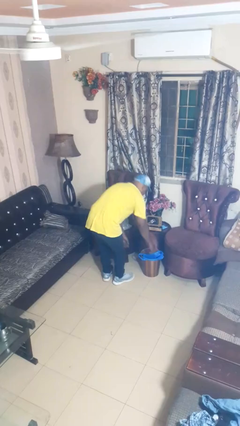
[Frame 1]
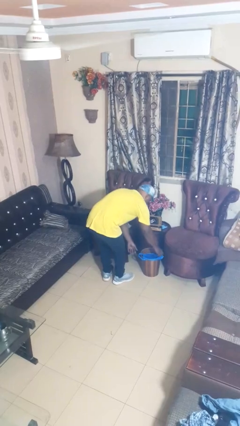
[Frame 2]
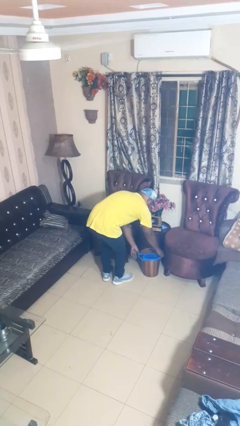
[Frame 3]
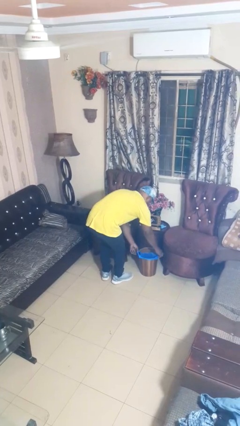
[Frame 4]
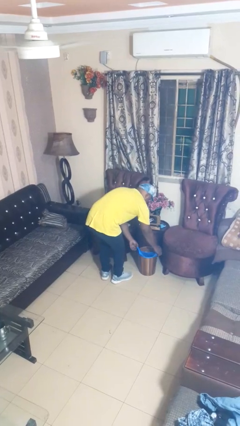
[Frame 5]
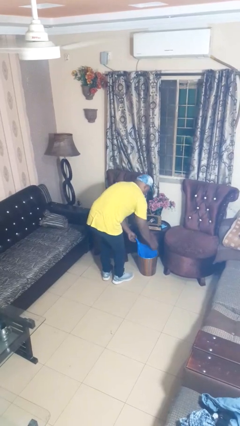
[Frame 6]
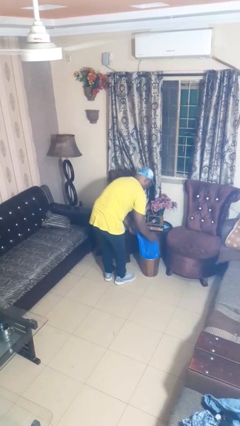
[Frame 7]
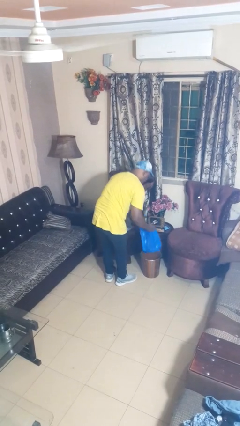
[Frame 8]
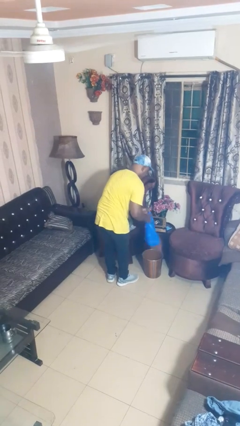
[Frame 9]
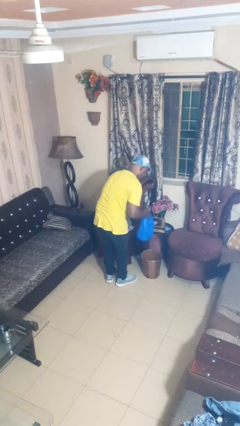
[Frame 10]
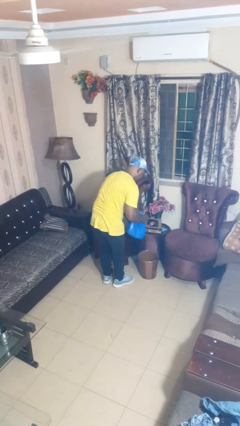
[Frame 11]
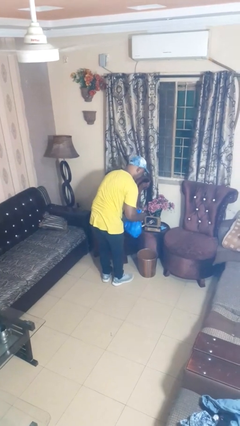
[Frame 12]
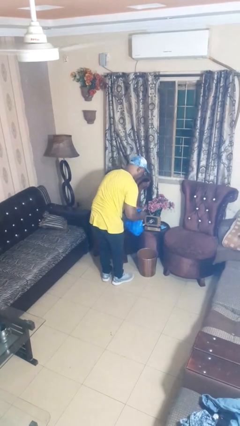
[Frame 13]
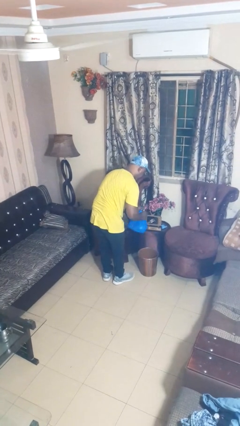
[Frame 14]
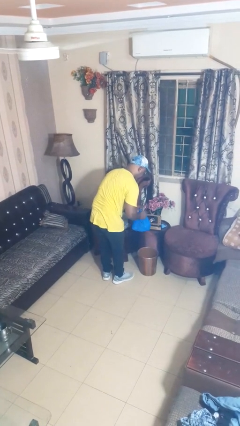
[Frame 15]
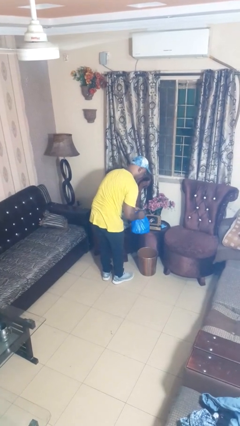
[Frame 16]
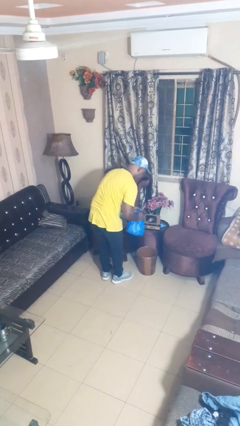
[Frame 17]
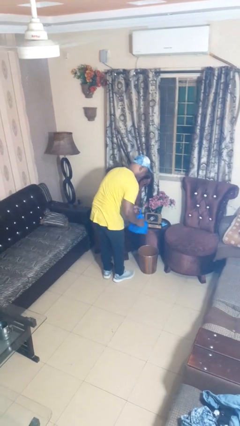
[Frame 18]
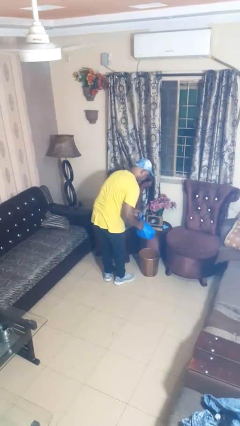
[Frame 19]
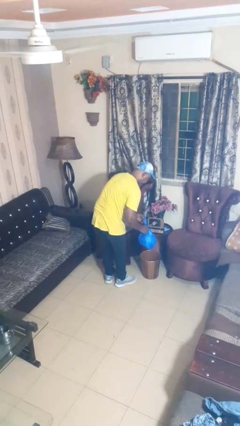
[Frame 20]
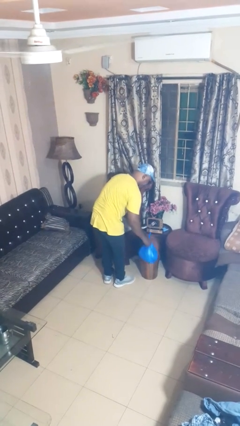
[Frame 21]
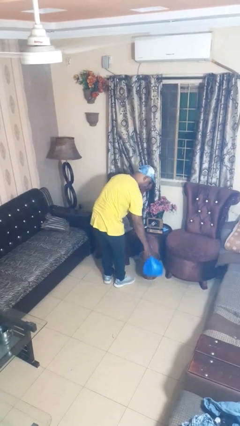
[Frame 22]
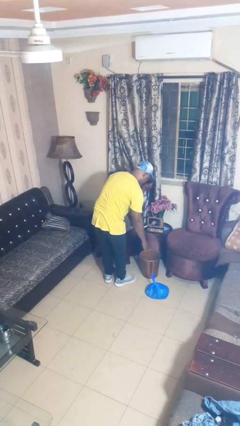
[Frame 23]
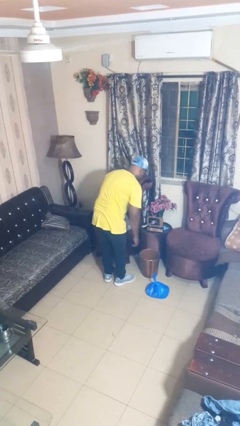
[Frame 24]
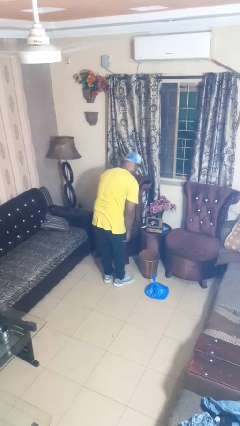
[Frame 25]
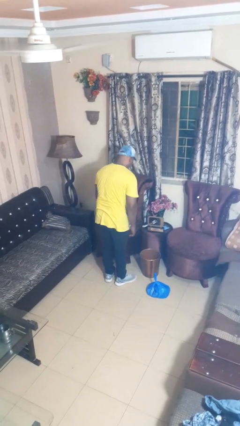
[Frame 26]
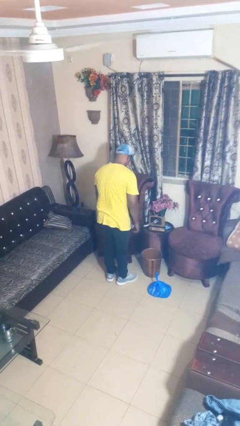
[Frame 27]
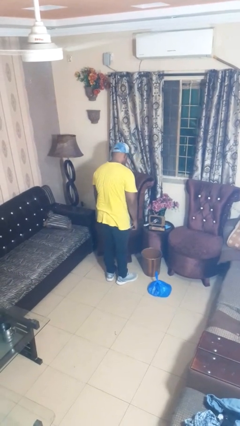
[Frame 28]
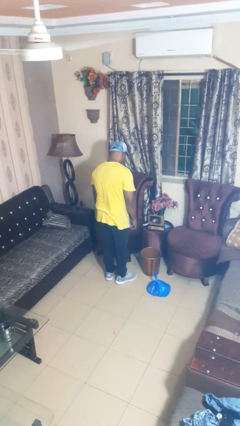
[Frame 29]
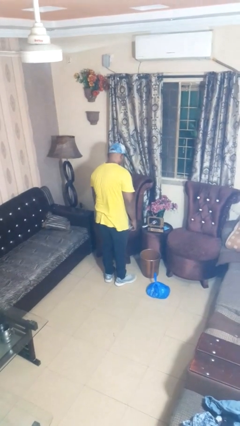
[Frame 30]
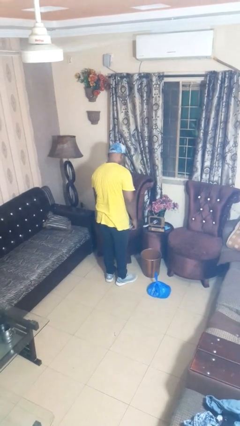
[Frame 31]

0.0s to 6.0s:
person removes trashbag from trashcan

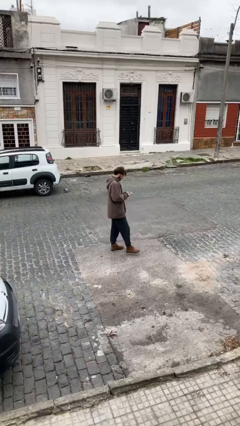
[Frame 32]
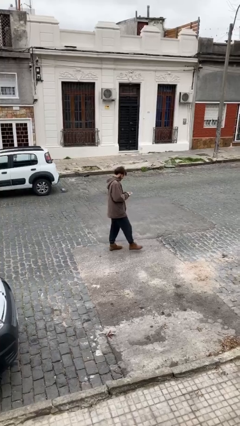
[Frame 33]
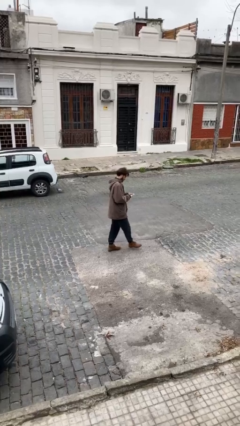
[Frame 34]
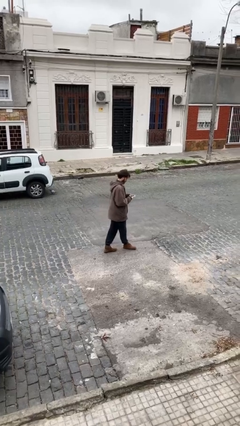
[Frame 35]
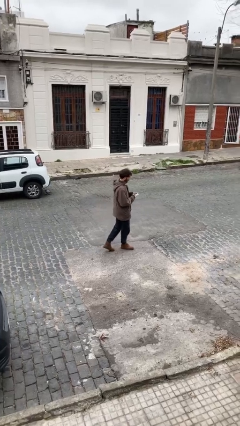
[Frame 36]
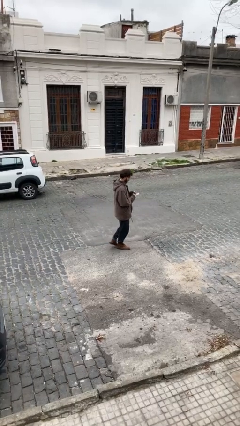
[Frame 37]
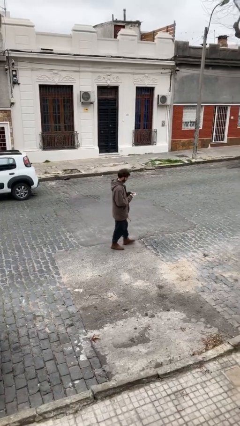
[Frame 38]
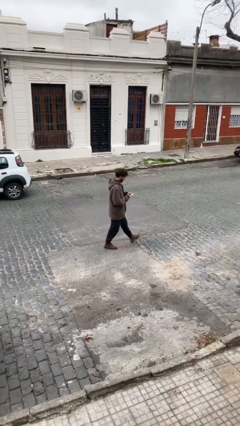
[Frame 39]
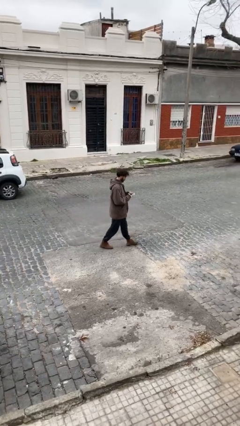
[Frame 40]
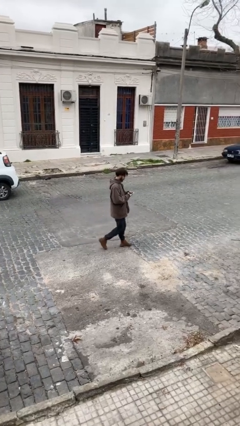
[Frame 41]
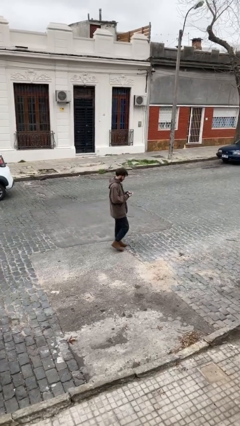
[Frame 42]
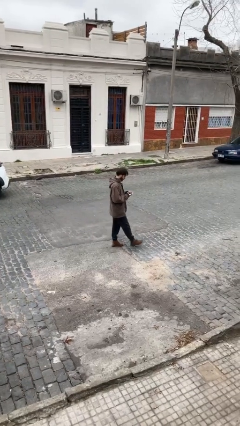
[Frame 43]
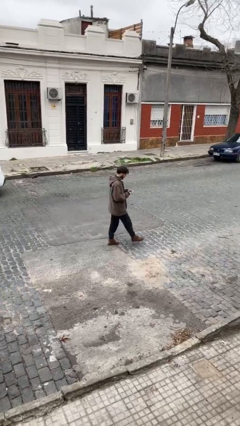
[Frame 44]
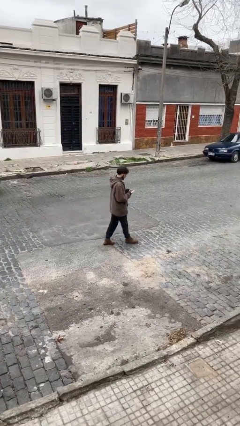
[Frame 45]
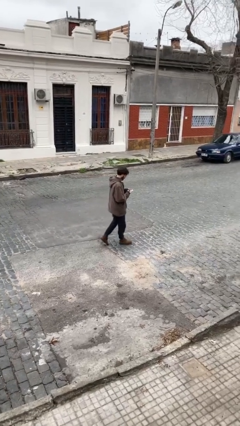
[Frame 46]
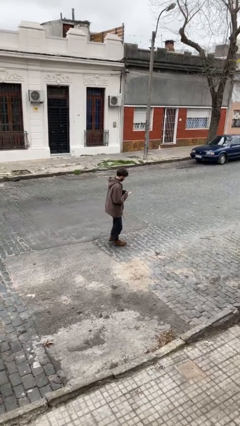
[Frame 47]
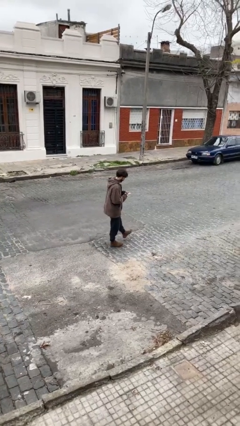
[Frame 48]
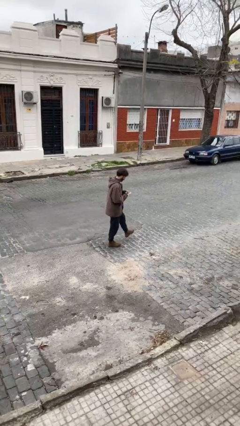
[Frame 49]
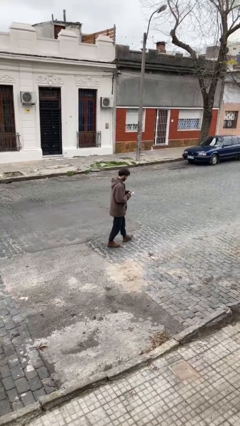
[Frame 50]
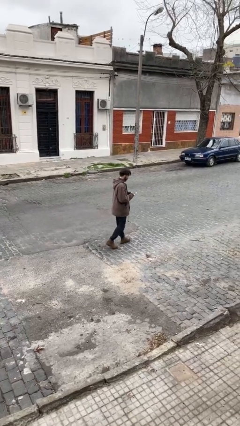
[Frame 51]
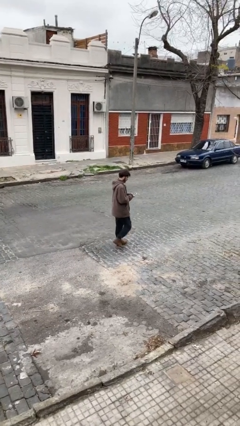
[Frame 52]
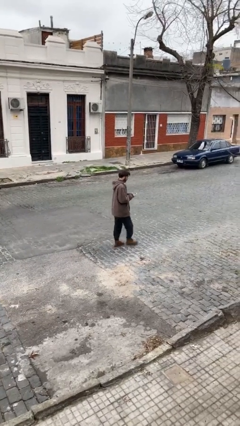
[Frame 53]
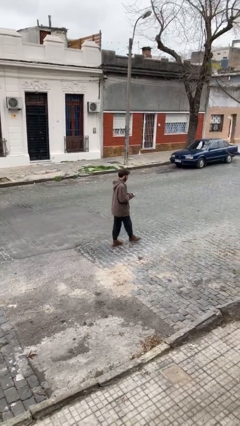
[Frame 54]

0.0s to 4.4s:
person texts on phone

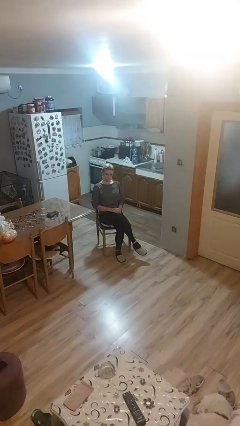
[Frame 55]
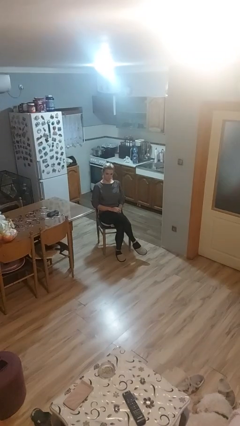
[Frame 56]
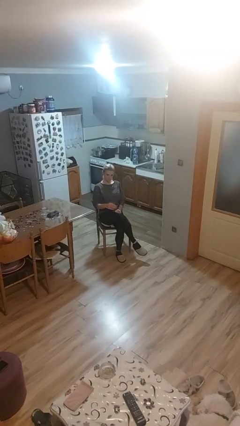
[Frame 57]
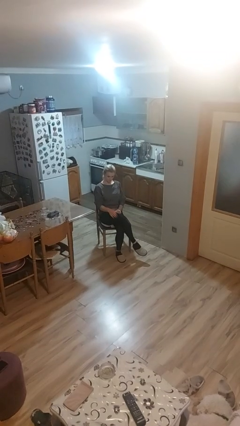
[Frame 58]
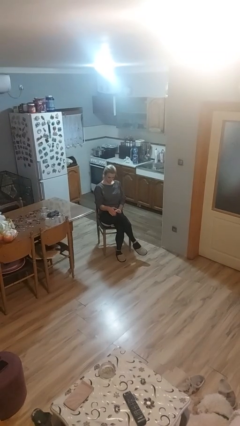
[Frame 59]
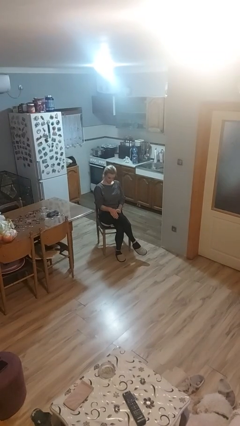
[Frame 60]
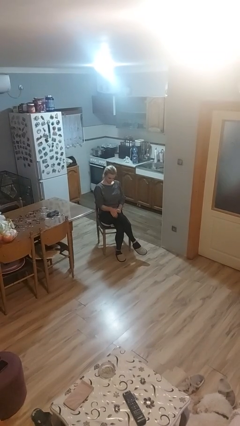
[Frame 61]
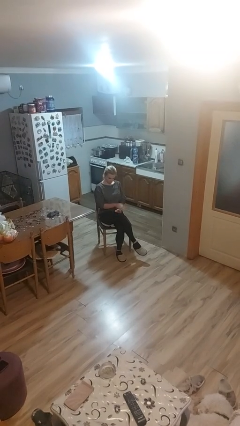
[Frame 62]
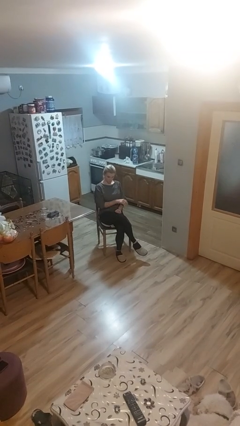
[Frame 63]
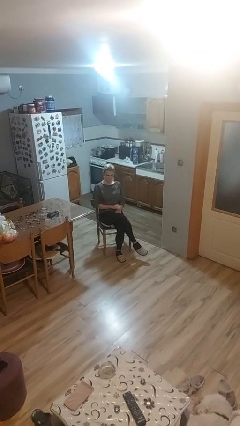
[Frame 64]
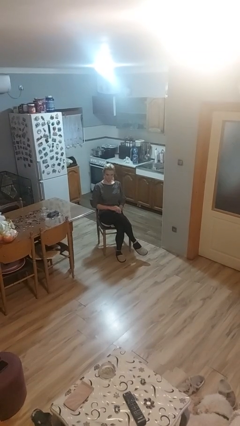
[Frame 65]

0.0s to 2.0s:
person slaps hands on thighs

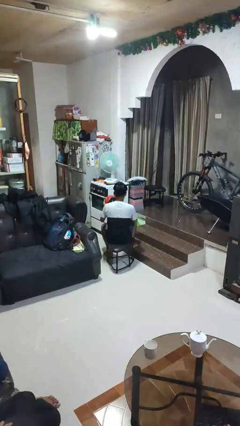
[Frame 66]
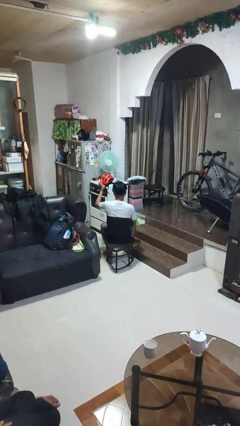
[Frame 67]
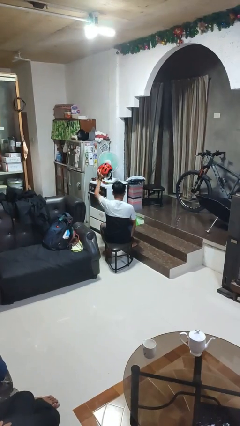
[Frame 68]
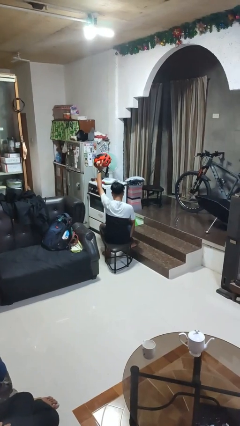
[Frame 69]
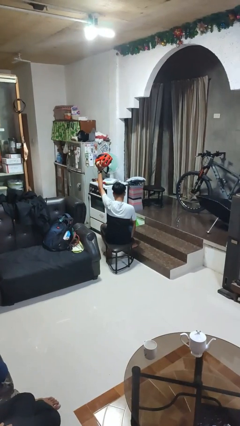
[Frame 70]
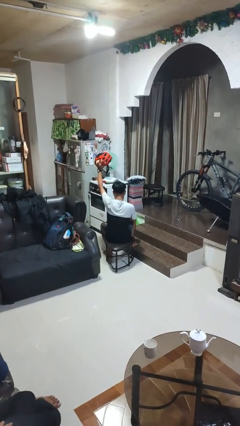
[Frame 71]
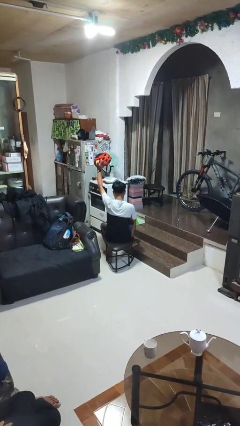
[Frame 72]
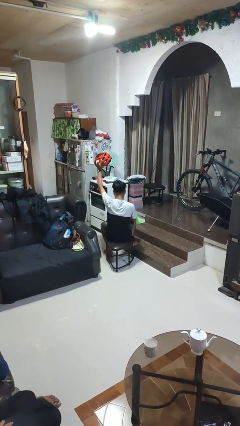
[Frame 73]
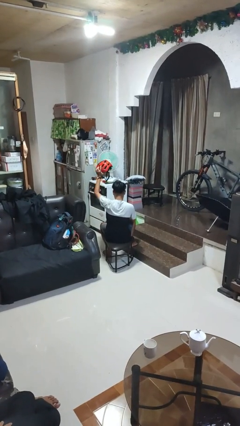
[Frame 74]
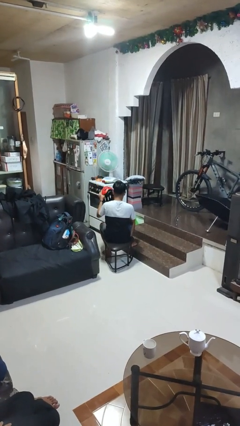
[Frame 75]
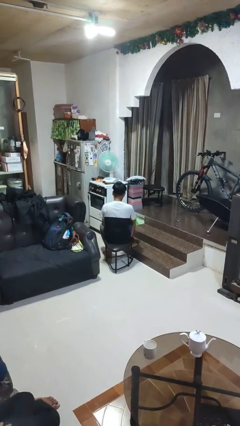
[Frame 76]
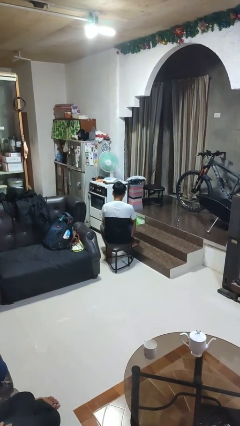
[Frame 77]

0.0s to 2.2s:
person holds object above head

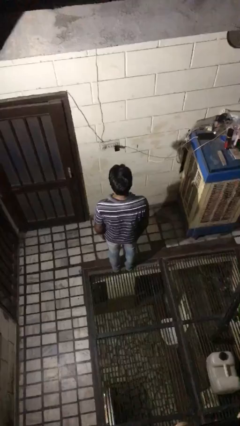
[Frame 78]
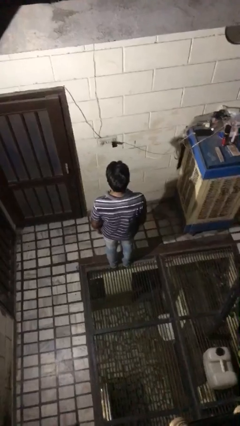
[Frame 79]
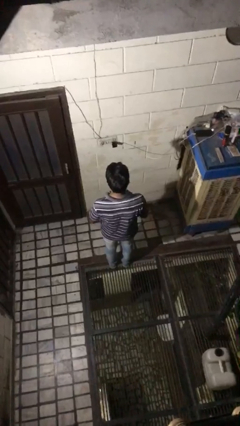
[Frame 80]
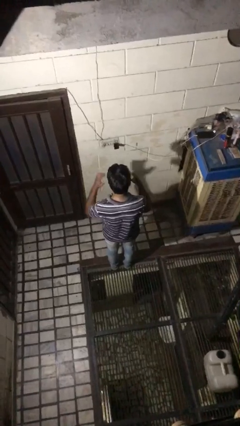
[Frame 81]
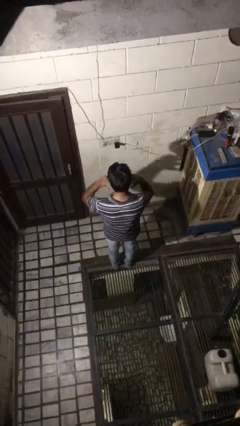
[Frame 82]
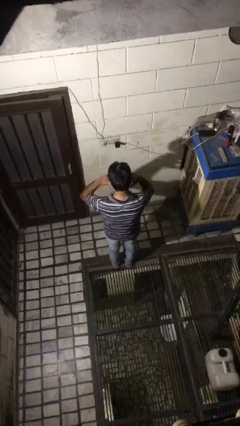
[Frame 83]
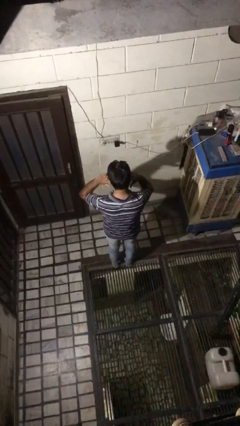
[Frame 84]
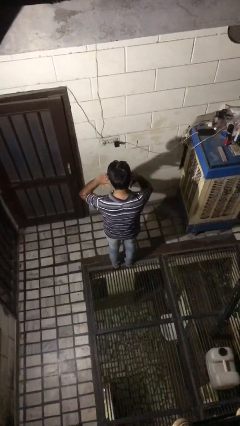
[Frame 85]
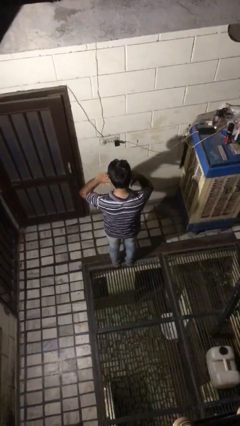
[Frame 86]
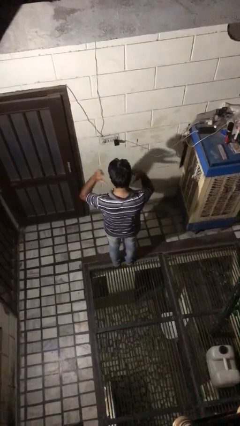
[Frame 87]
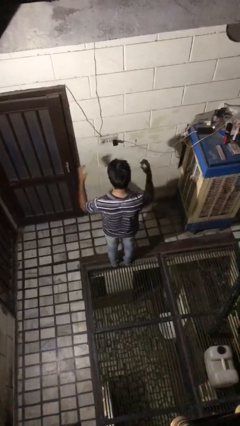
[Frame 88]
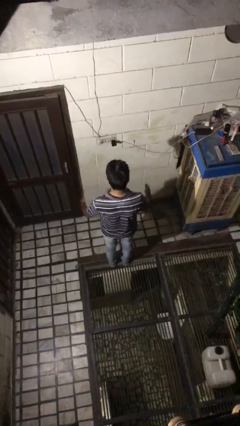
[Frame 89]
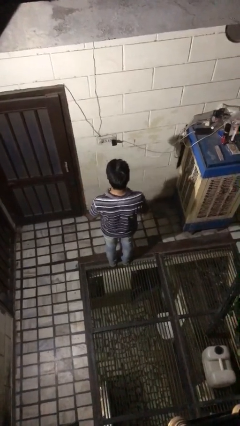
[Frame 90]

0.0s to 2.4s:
person puts fingers in ear

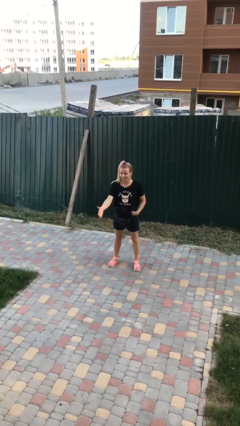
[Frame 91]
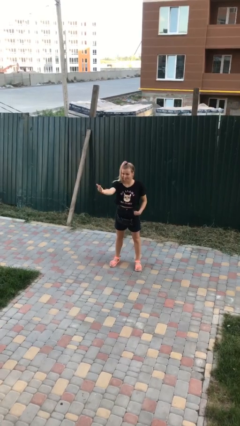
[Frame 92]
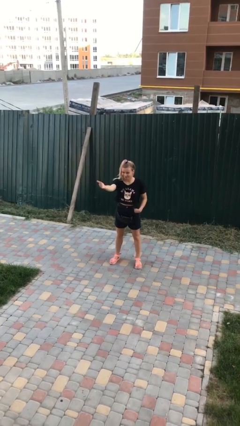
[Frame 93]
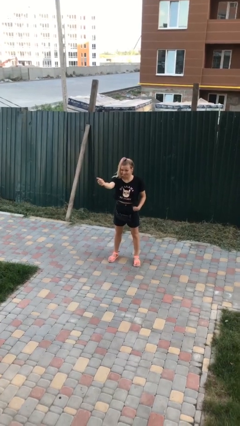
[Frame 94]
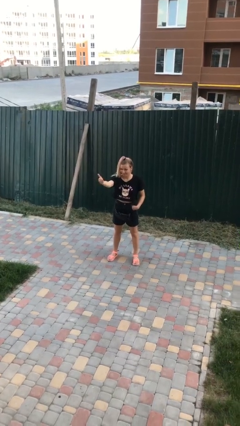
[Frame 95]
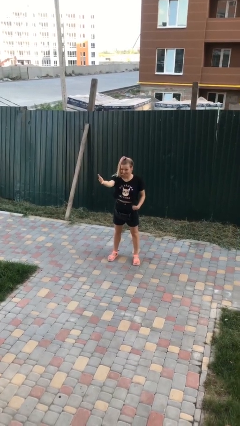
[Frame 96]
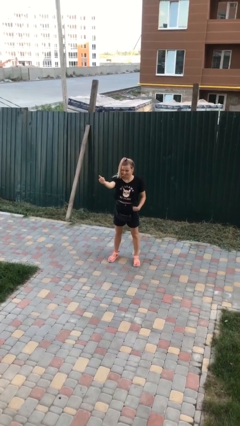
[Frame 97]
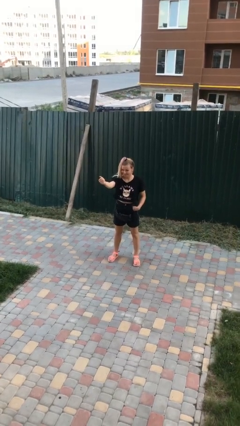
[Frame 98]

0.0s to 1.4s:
person gestures come here
